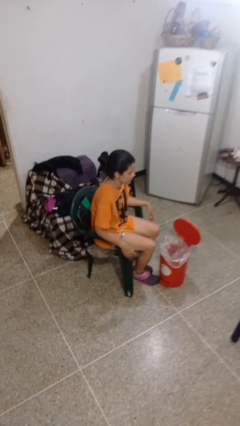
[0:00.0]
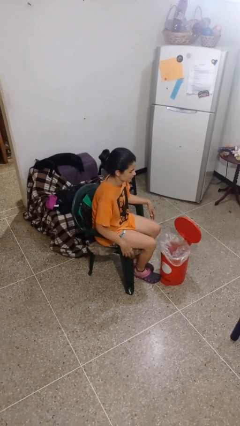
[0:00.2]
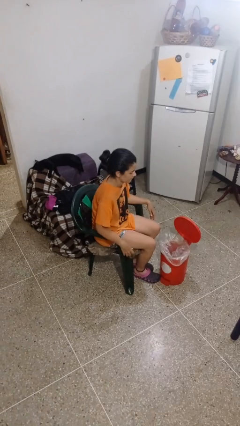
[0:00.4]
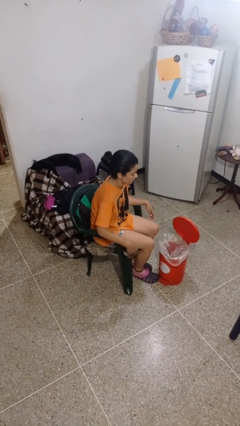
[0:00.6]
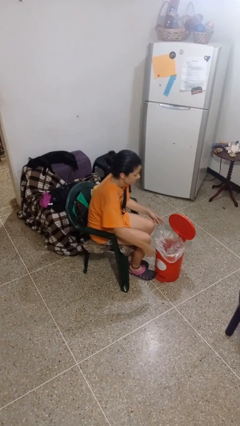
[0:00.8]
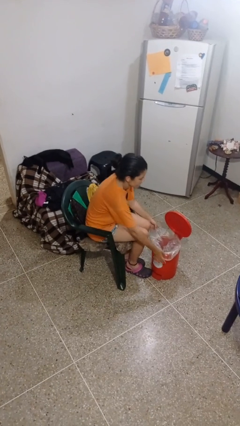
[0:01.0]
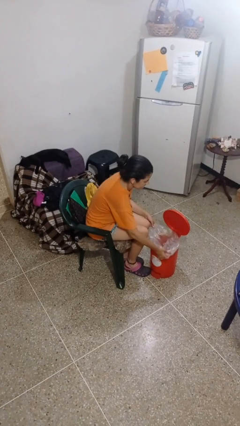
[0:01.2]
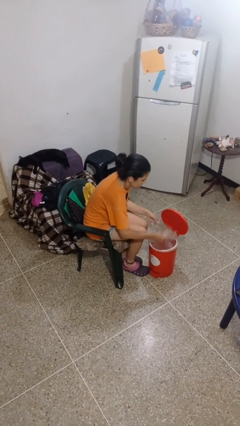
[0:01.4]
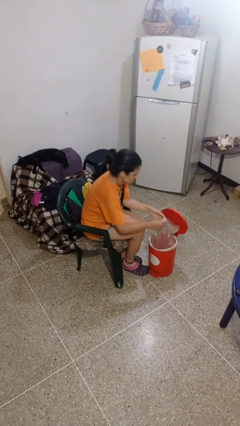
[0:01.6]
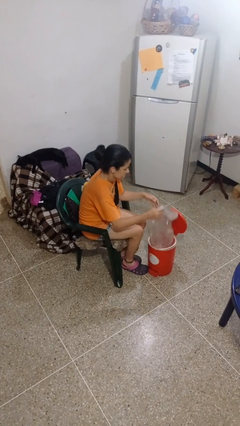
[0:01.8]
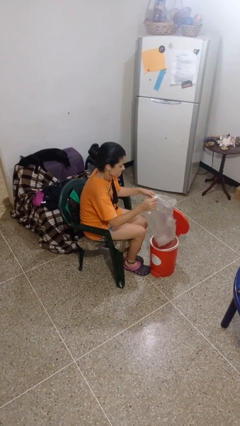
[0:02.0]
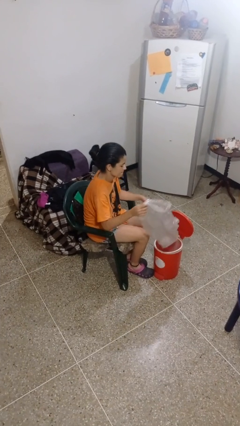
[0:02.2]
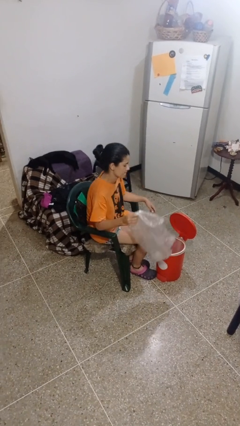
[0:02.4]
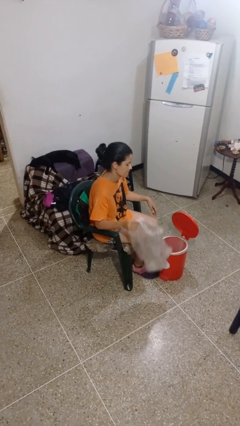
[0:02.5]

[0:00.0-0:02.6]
person removes trashbag from trashcan

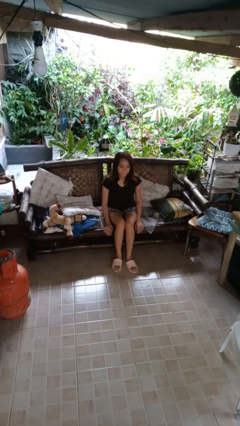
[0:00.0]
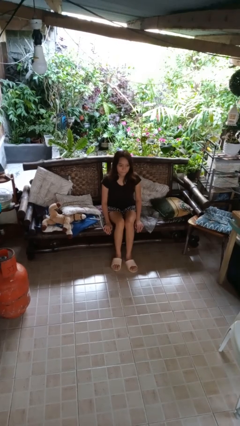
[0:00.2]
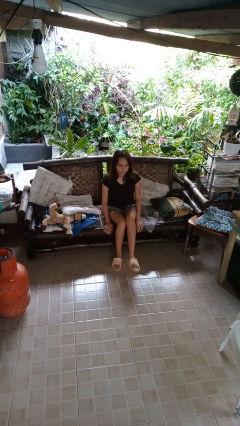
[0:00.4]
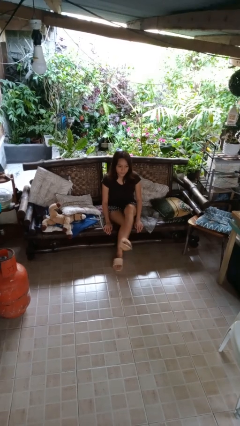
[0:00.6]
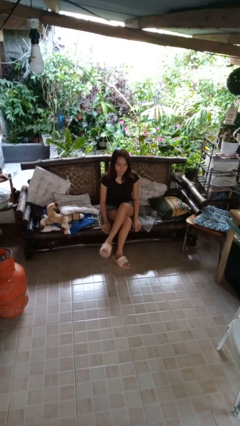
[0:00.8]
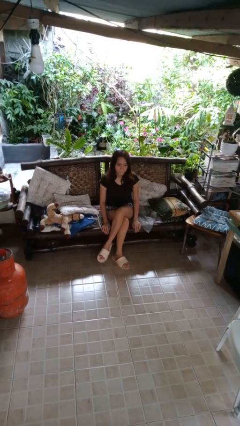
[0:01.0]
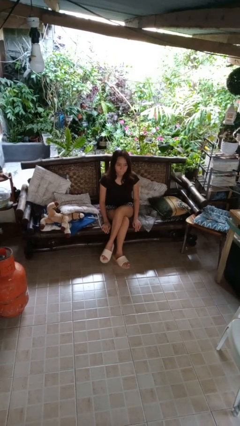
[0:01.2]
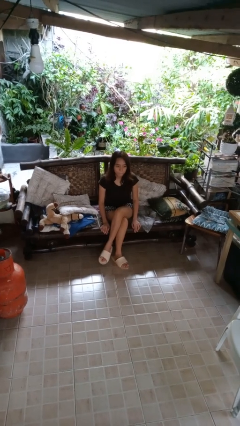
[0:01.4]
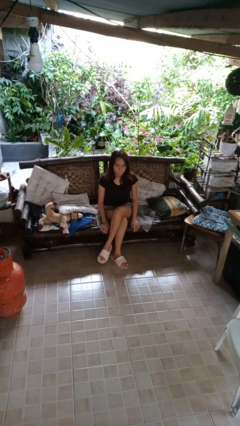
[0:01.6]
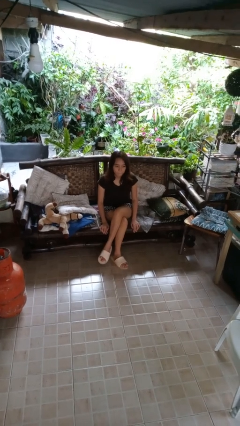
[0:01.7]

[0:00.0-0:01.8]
person crosses legs

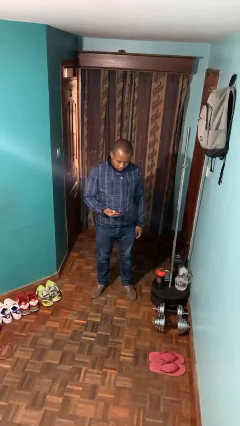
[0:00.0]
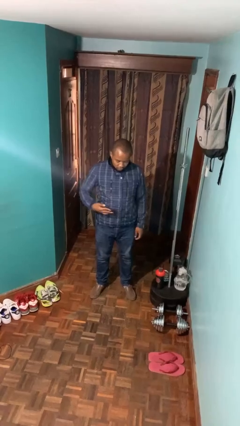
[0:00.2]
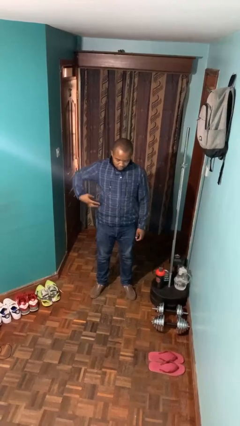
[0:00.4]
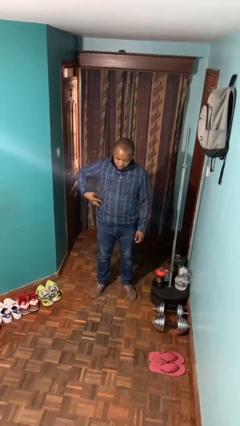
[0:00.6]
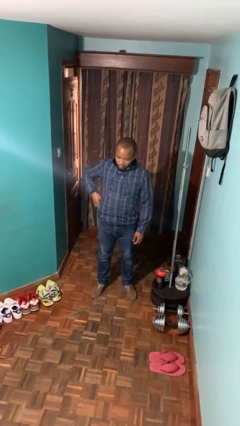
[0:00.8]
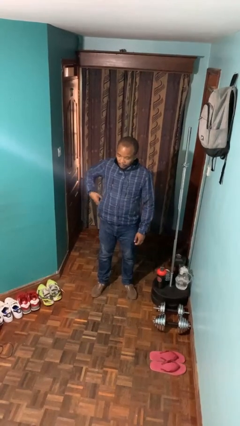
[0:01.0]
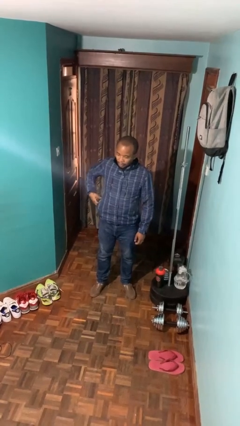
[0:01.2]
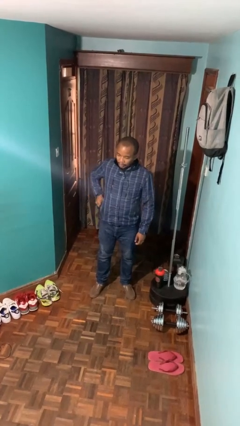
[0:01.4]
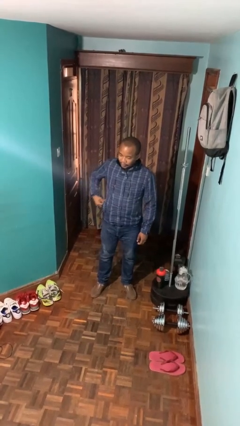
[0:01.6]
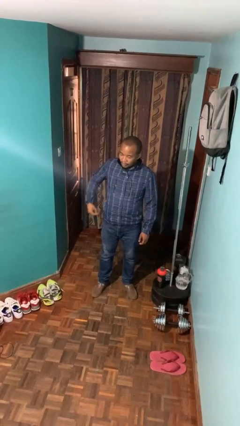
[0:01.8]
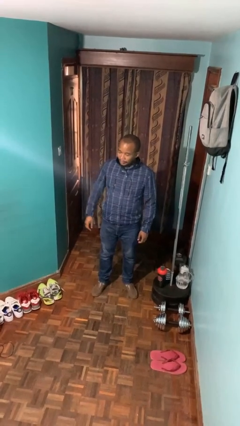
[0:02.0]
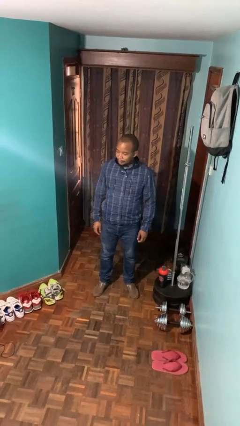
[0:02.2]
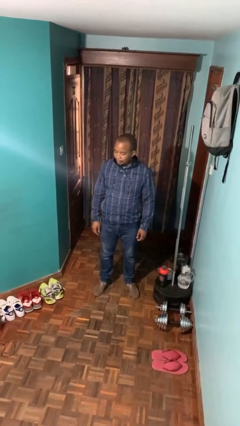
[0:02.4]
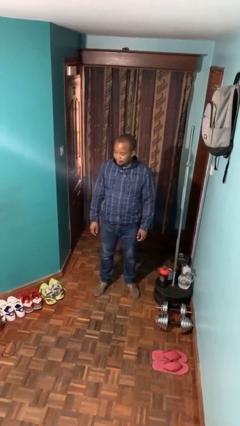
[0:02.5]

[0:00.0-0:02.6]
person puts phone into pocket

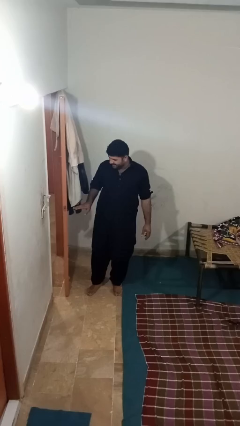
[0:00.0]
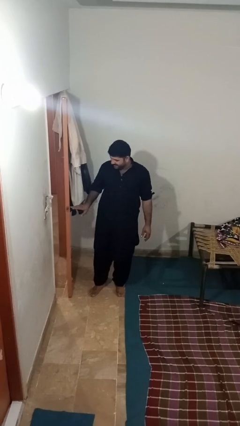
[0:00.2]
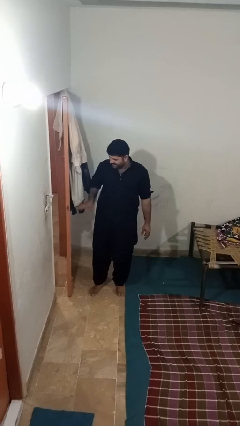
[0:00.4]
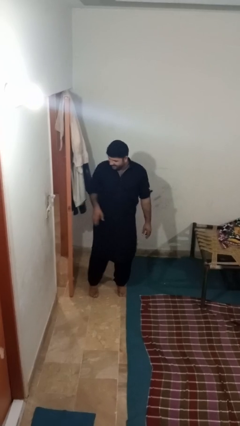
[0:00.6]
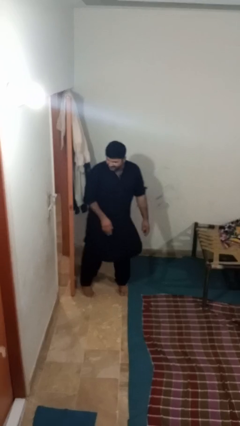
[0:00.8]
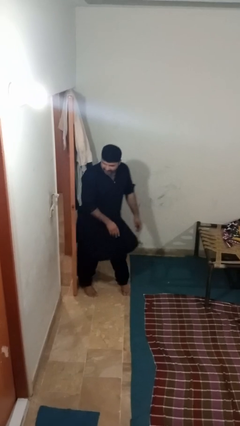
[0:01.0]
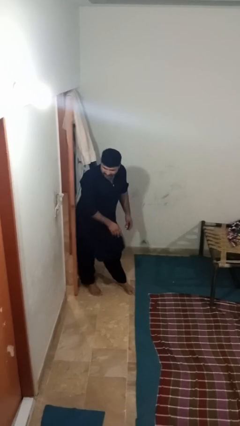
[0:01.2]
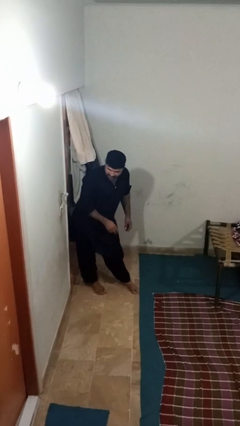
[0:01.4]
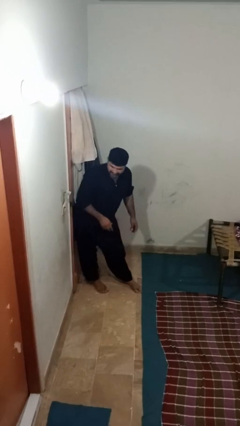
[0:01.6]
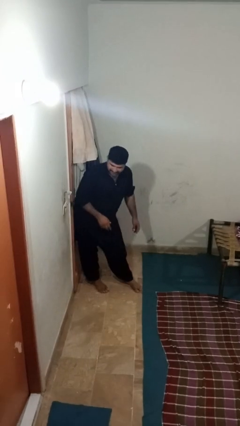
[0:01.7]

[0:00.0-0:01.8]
person closes door with hip

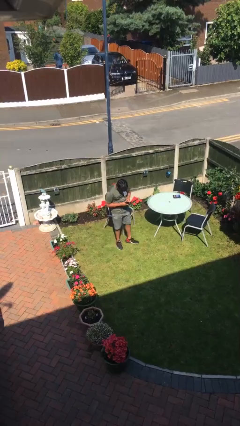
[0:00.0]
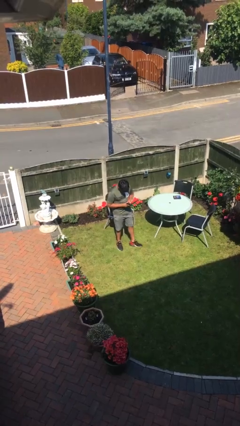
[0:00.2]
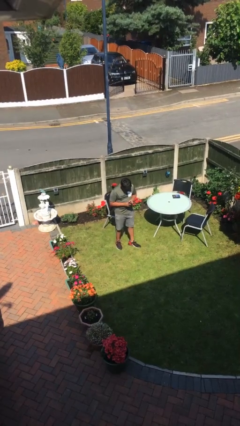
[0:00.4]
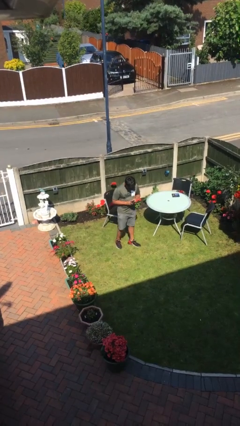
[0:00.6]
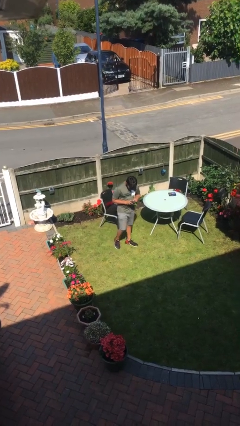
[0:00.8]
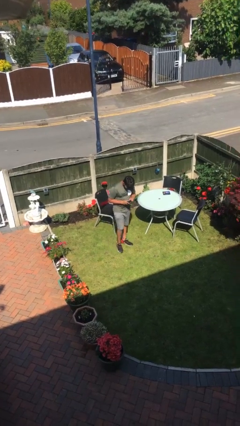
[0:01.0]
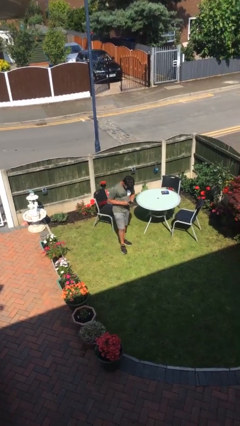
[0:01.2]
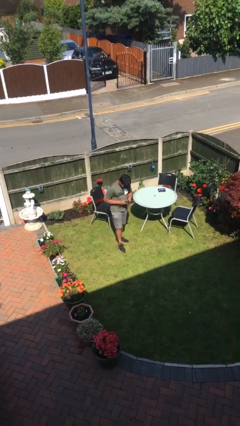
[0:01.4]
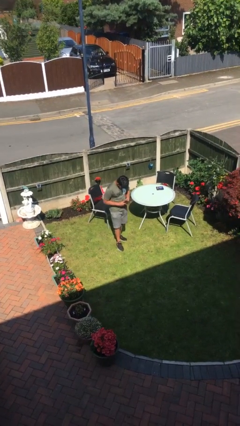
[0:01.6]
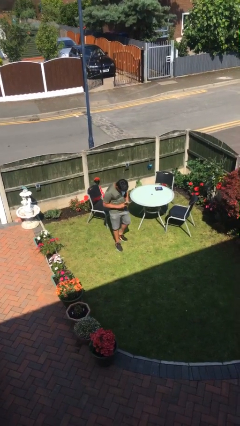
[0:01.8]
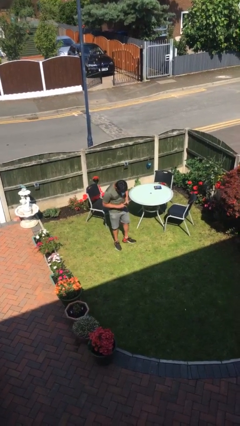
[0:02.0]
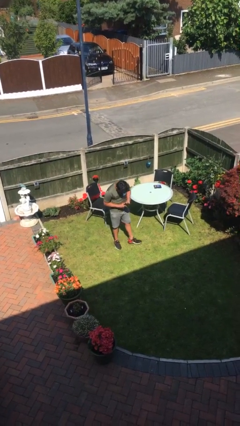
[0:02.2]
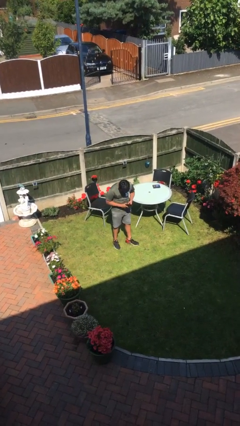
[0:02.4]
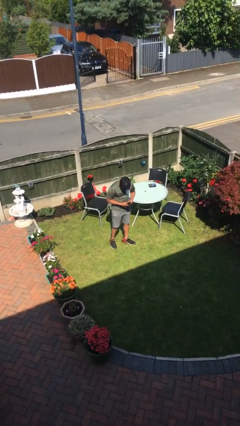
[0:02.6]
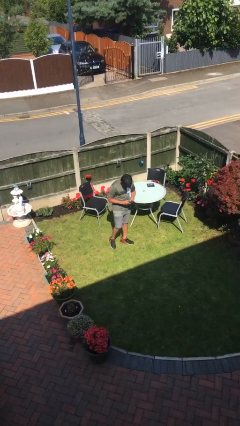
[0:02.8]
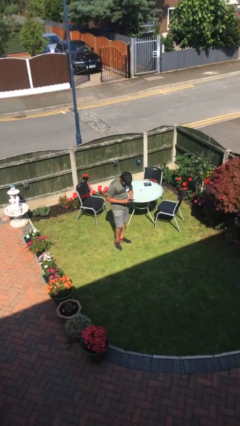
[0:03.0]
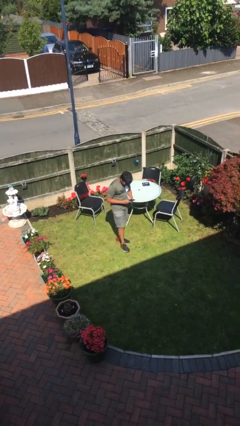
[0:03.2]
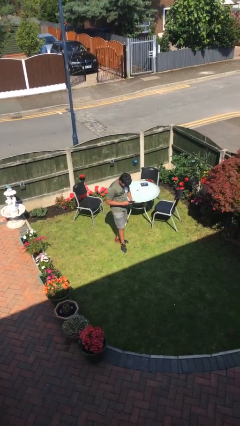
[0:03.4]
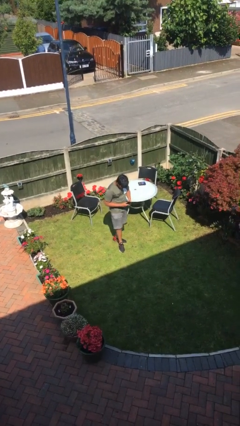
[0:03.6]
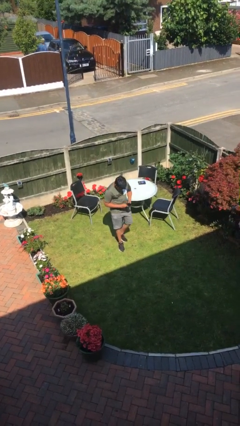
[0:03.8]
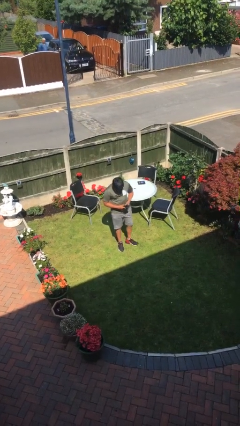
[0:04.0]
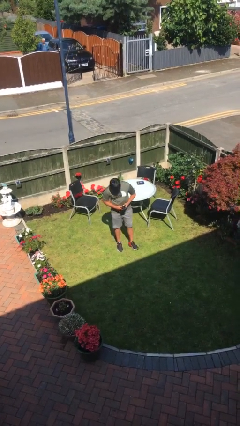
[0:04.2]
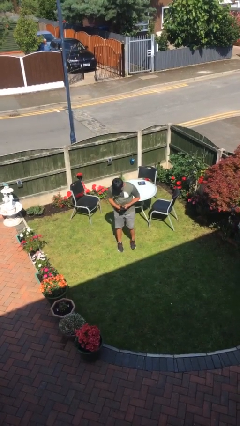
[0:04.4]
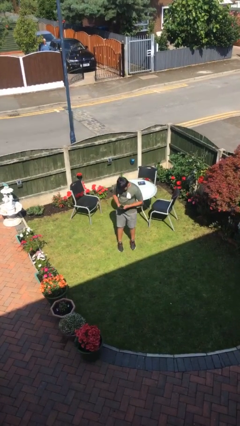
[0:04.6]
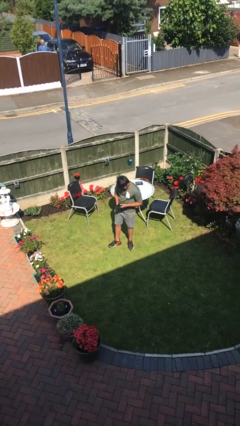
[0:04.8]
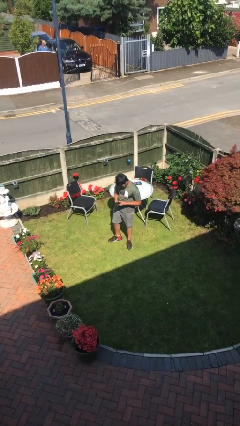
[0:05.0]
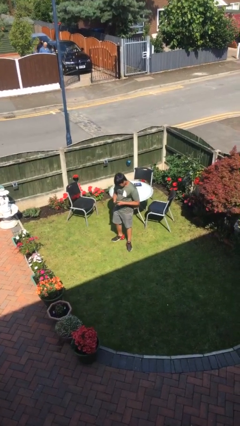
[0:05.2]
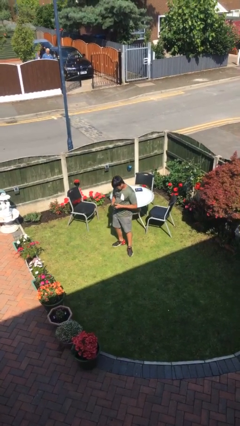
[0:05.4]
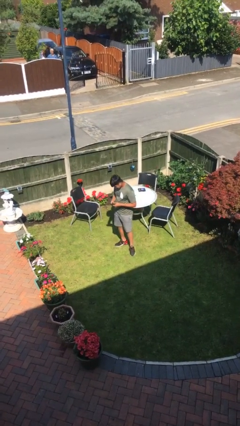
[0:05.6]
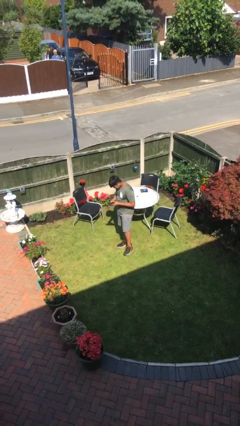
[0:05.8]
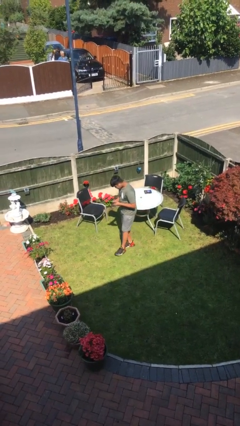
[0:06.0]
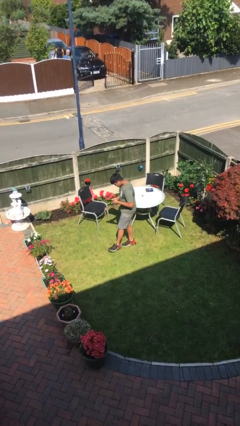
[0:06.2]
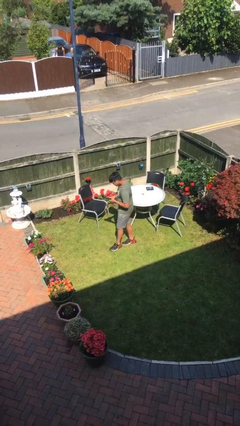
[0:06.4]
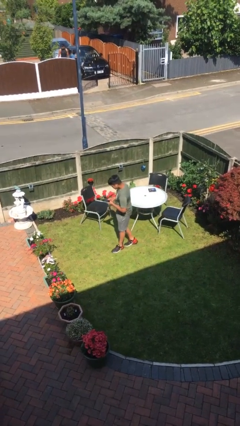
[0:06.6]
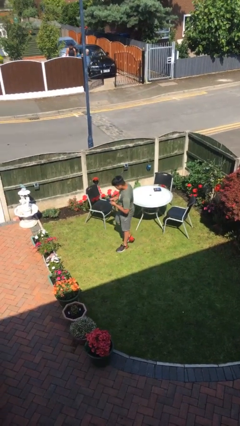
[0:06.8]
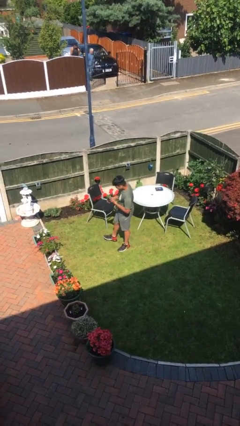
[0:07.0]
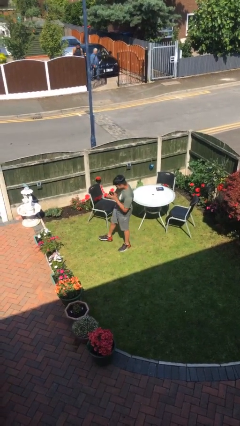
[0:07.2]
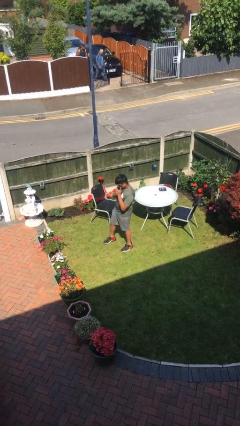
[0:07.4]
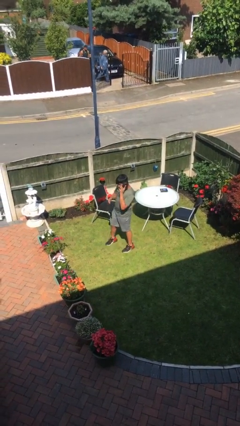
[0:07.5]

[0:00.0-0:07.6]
person texts on phone

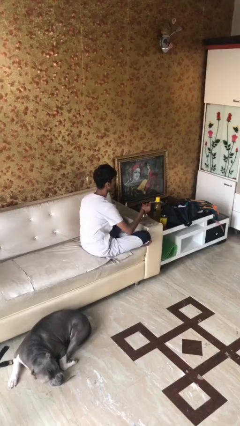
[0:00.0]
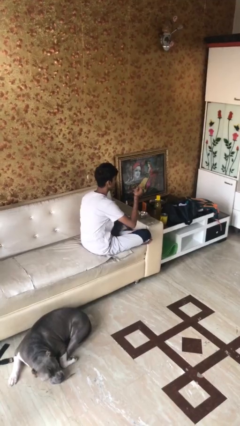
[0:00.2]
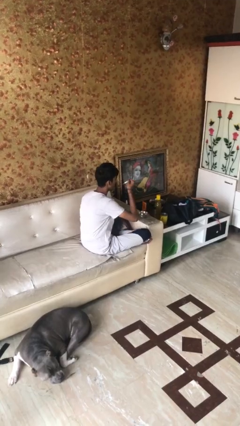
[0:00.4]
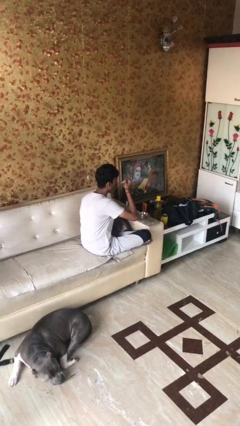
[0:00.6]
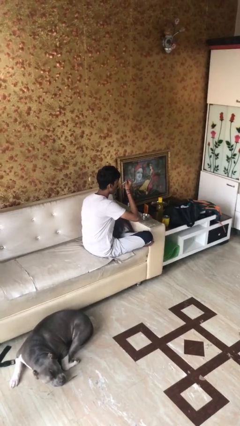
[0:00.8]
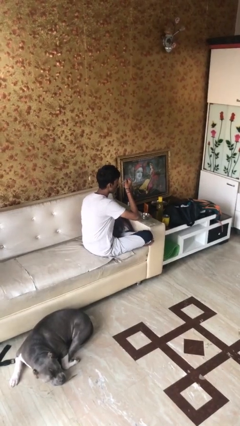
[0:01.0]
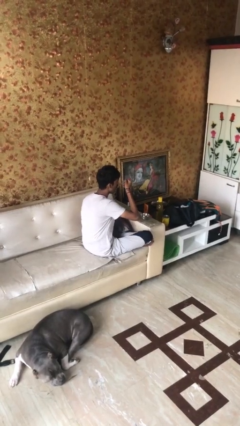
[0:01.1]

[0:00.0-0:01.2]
person eats with utensil
